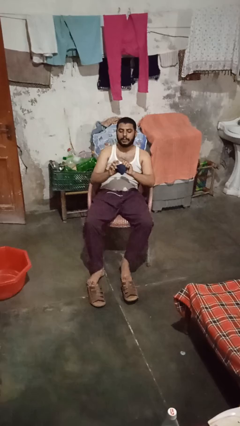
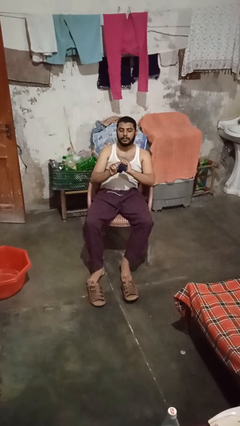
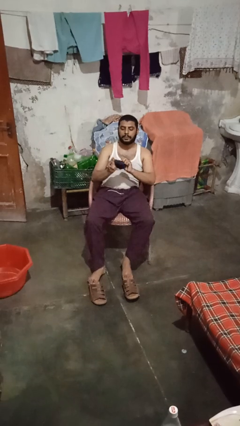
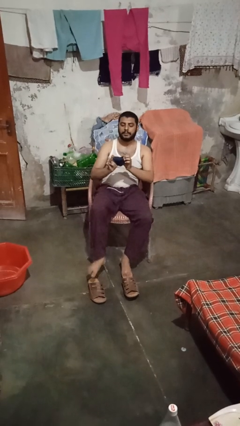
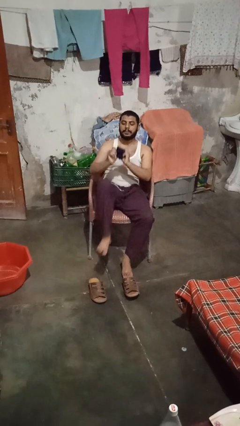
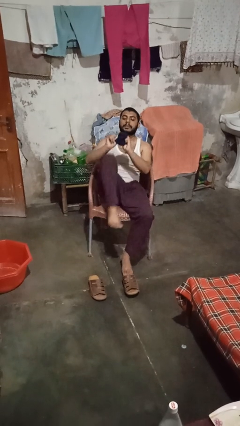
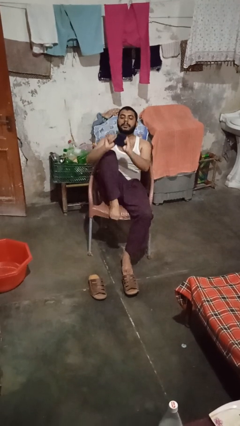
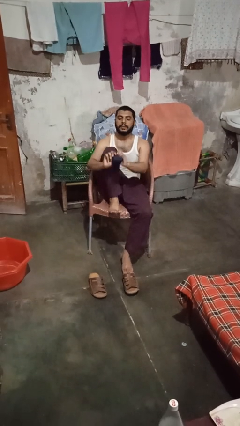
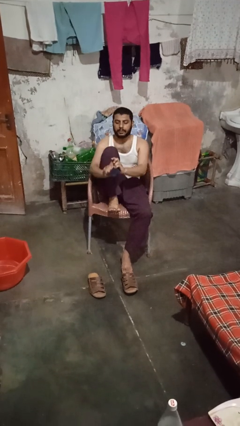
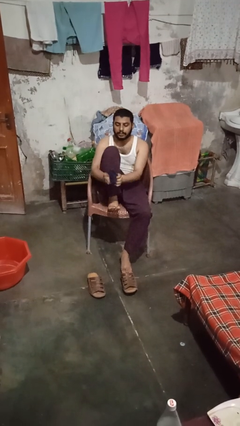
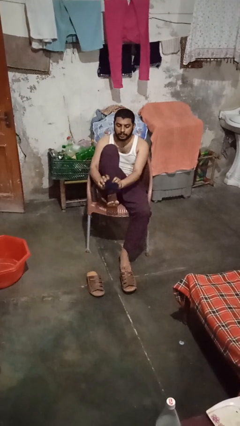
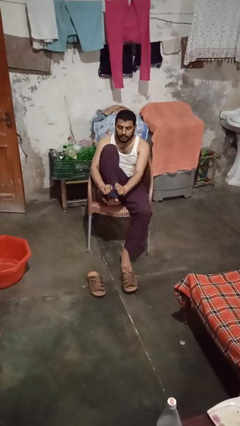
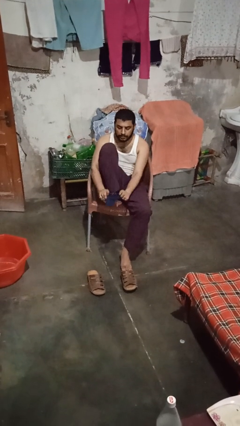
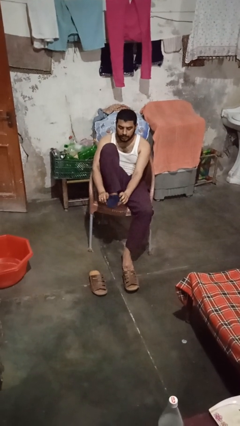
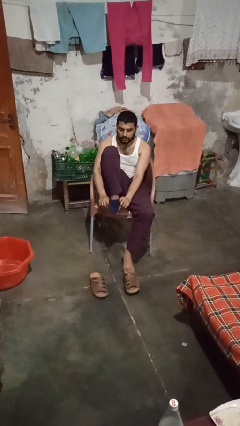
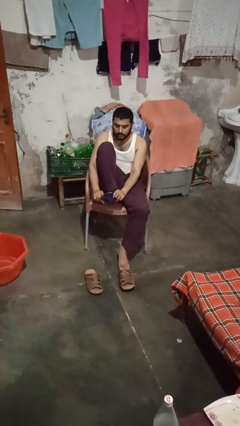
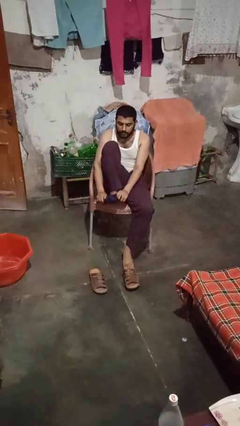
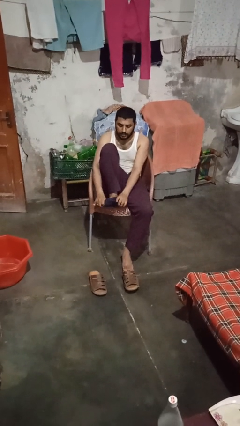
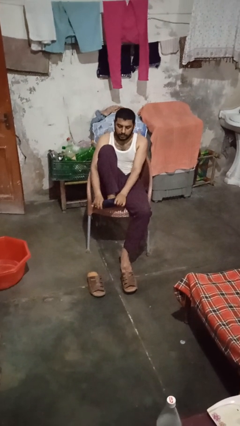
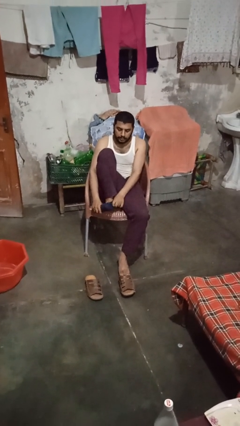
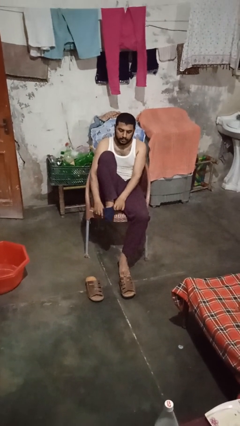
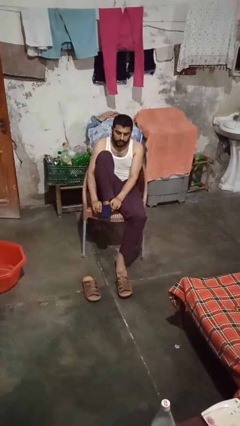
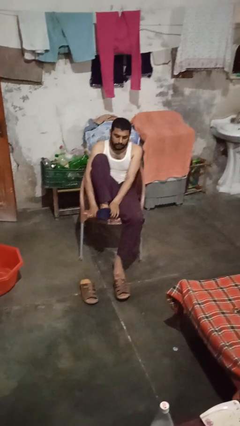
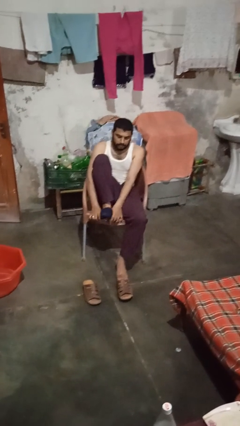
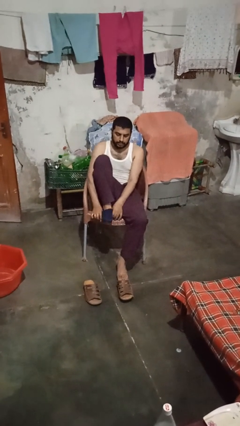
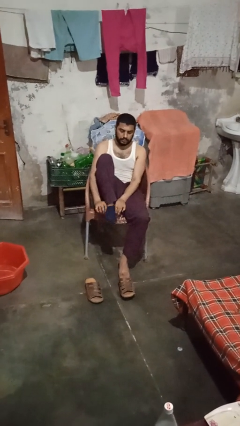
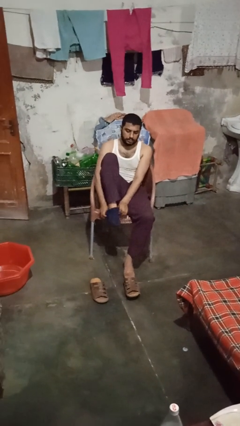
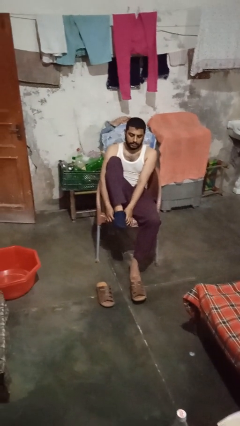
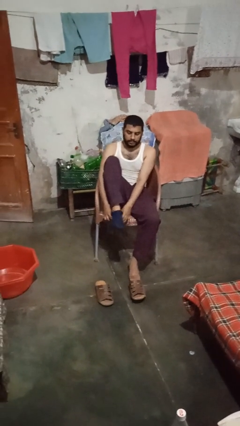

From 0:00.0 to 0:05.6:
person puts on socks

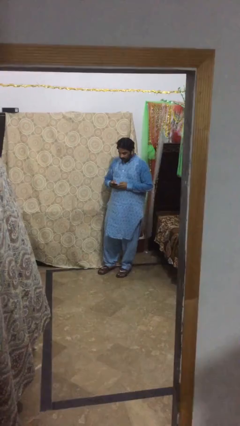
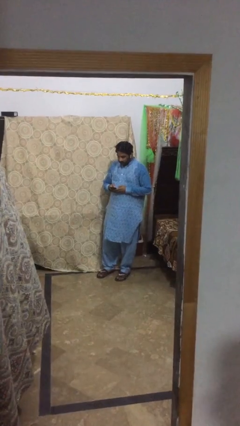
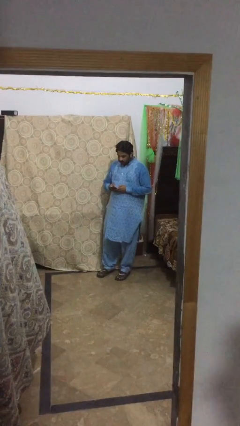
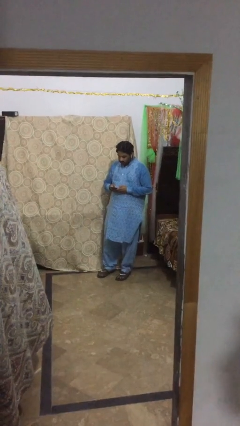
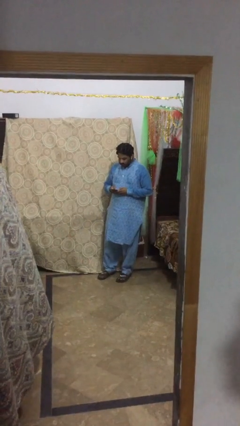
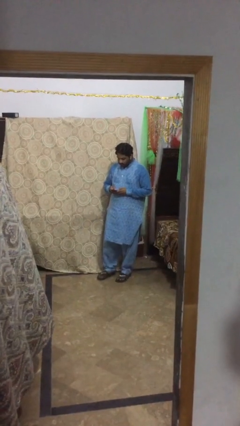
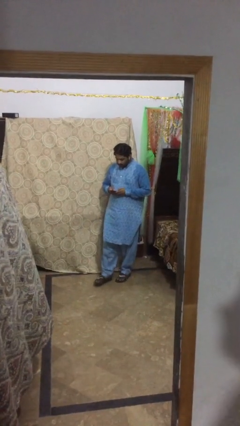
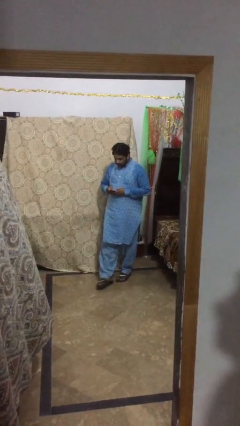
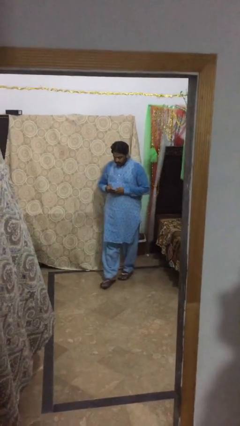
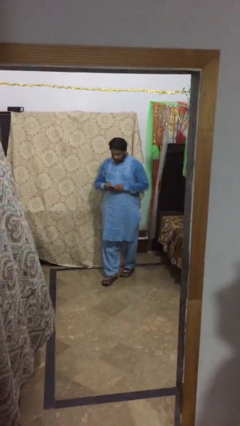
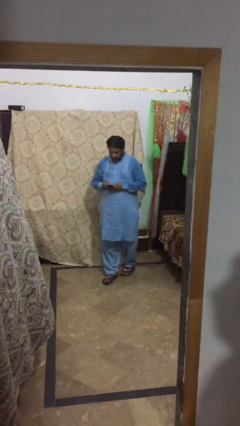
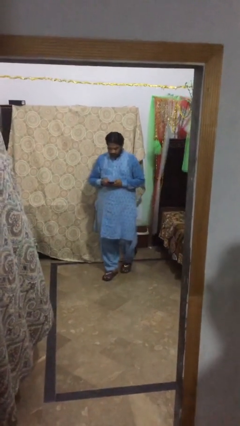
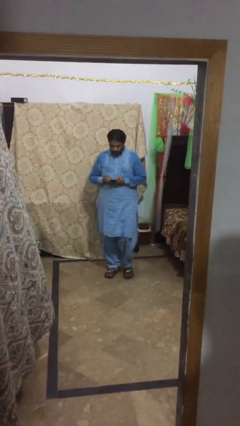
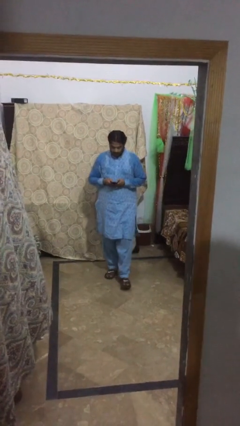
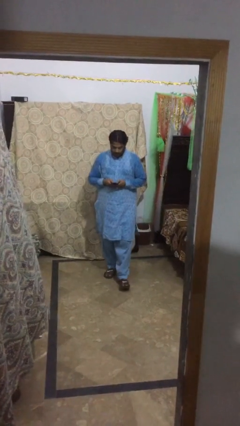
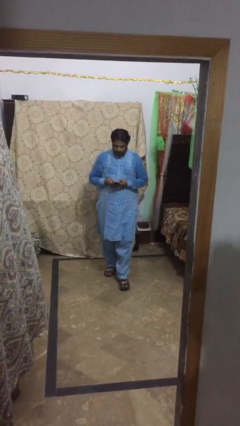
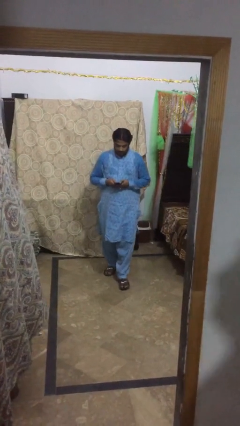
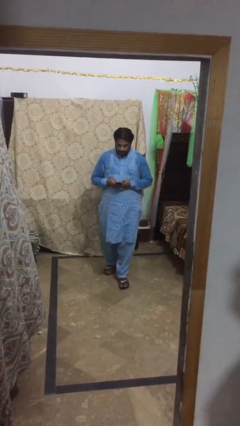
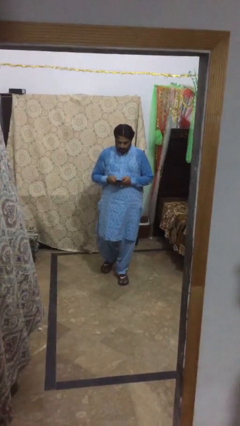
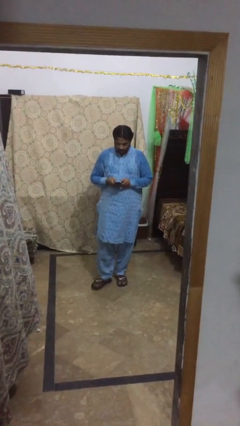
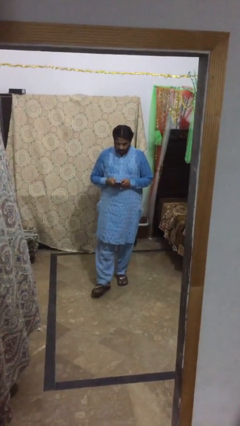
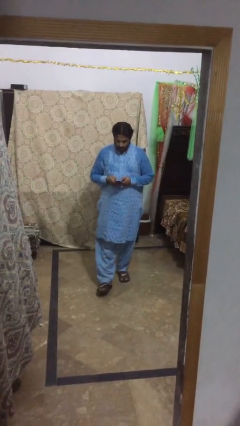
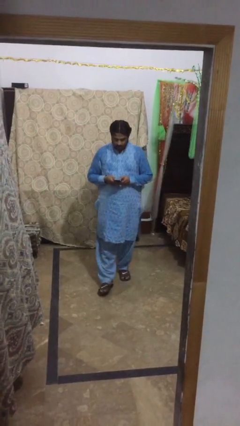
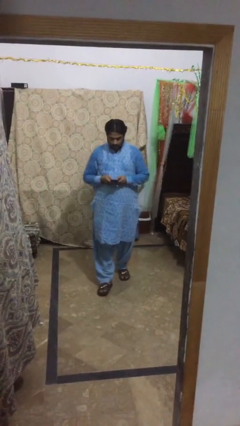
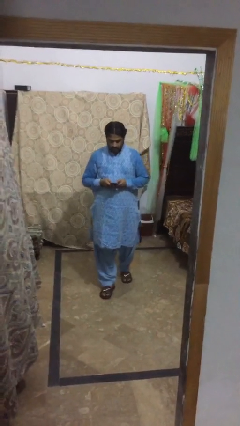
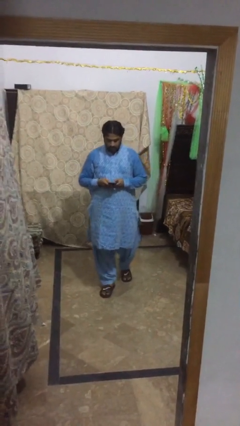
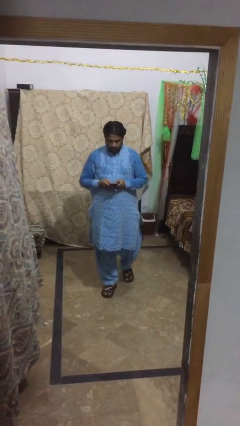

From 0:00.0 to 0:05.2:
person texts on phone

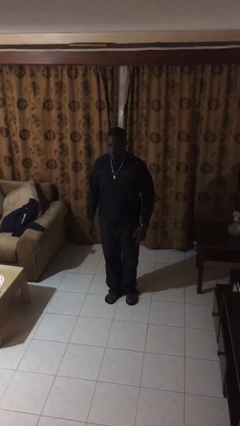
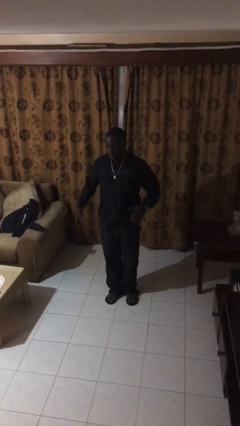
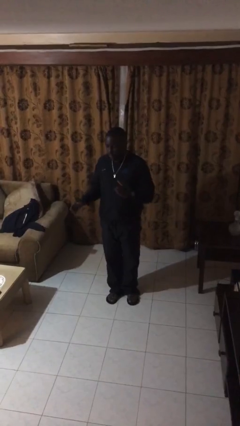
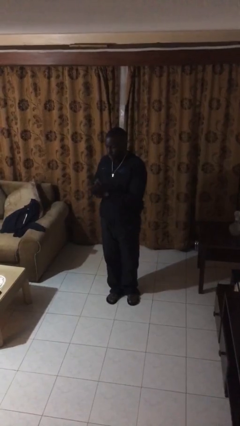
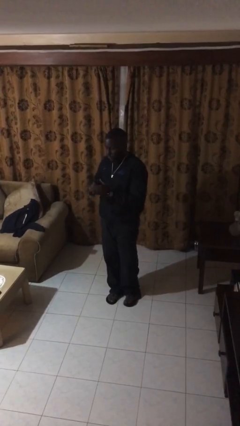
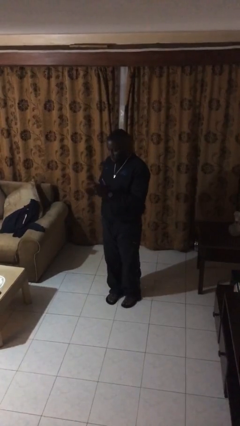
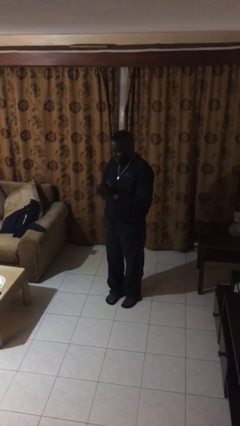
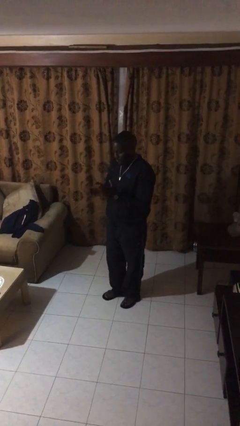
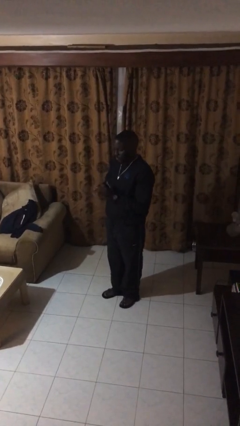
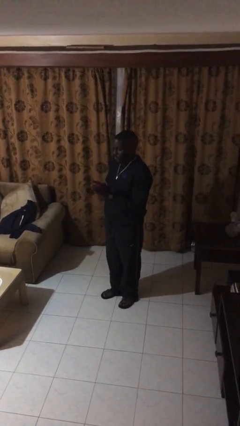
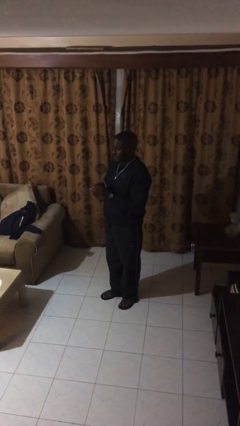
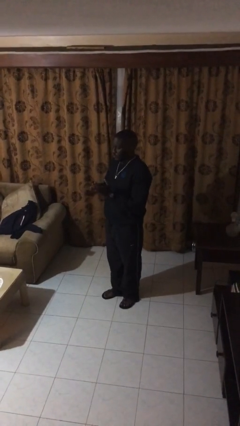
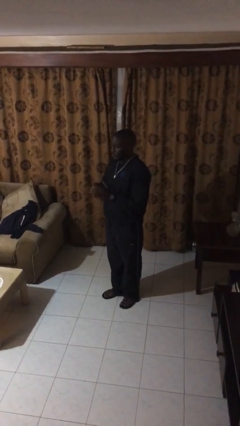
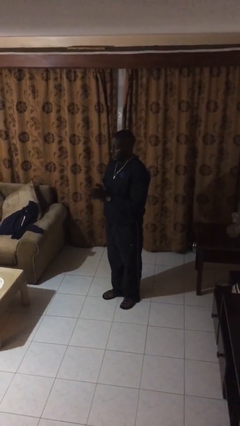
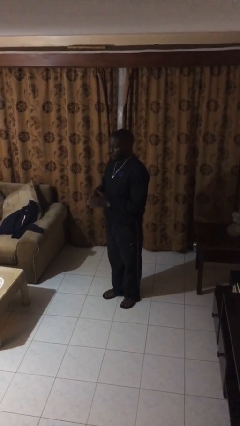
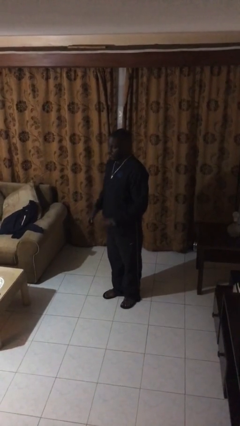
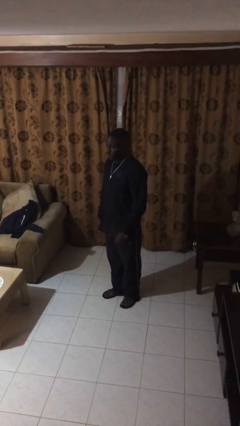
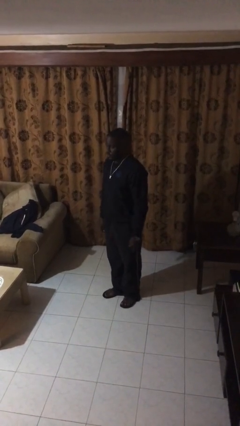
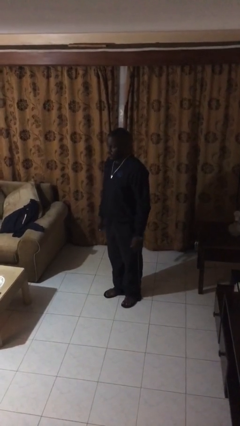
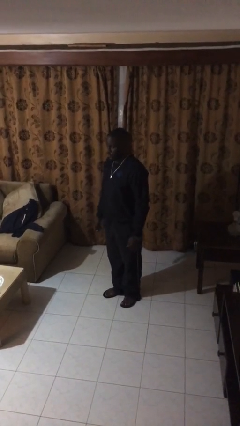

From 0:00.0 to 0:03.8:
person claps hands

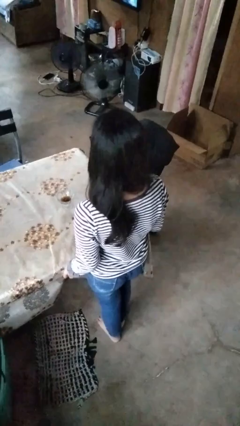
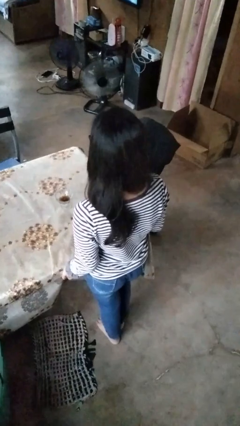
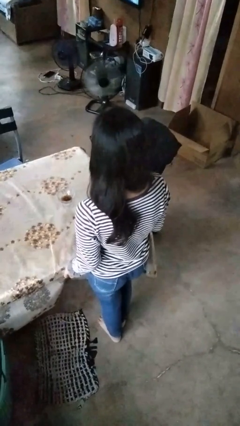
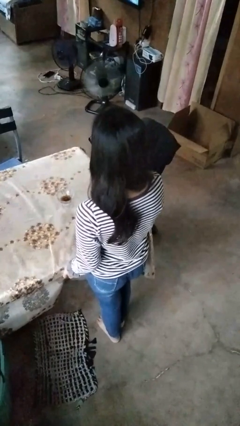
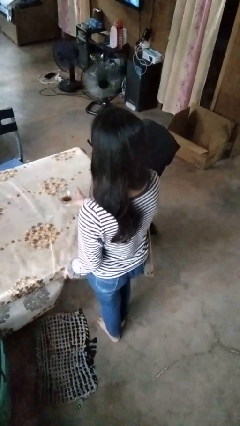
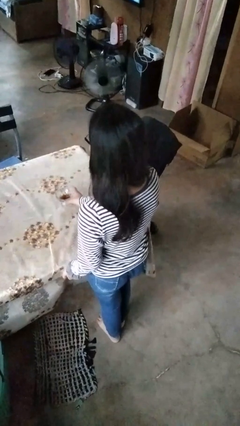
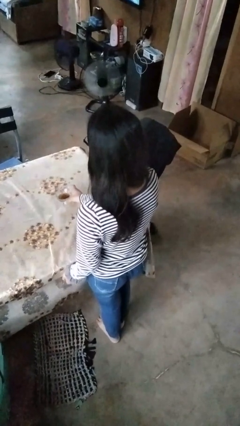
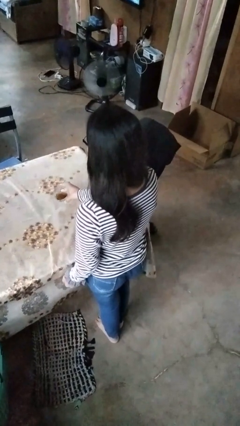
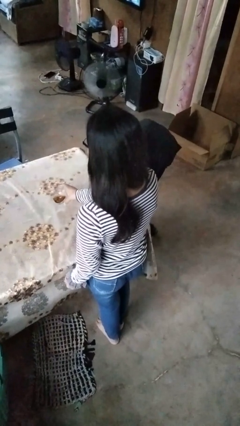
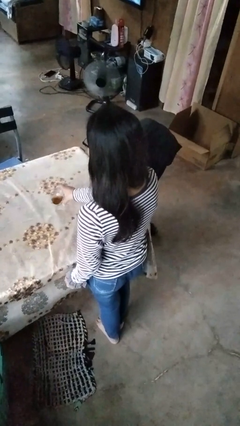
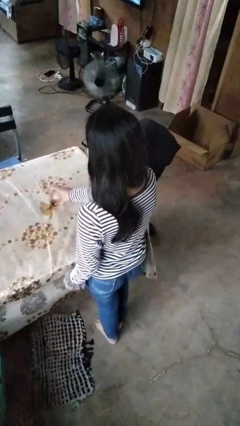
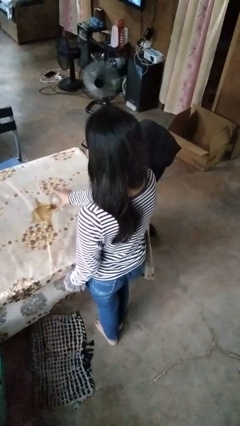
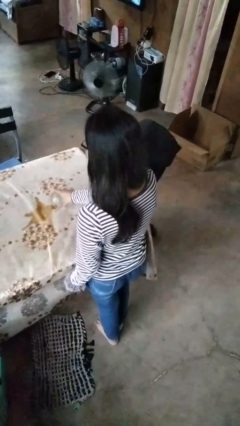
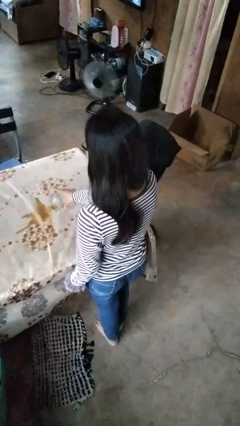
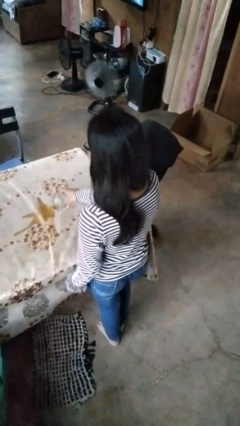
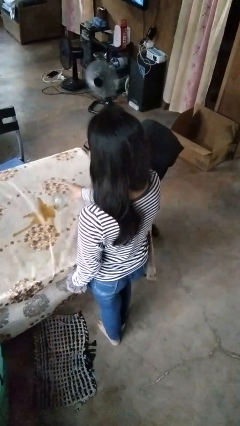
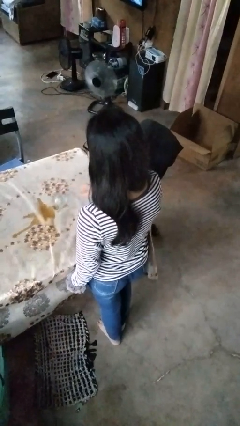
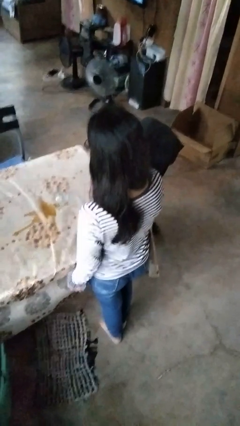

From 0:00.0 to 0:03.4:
person spills on table
